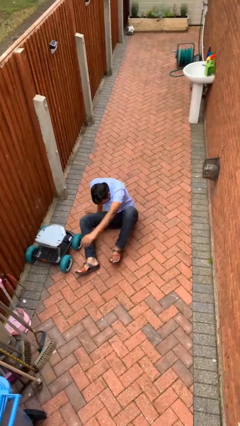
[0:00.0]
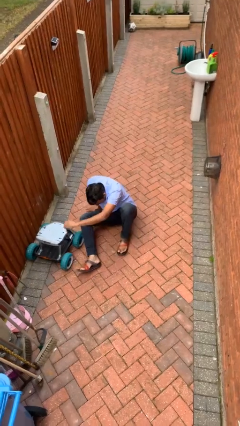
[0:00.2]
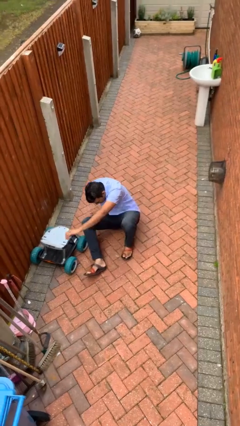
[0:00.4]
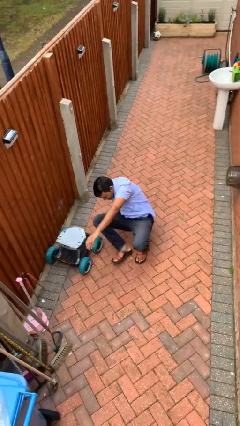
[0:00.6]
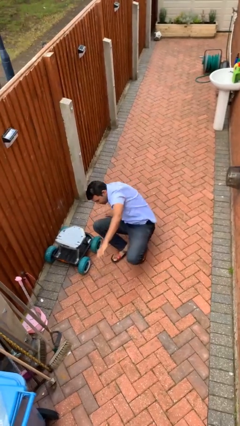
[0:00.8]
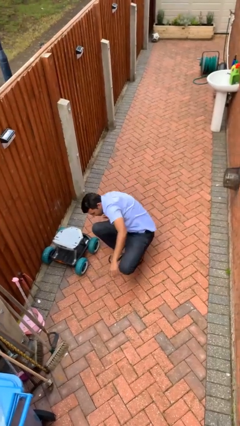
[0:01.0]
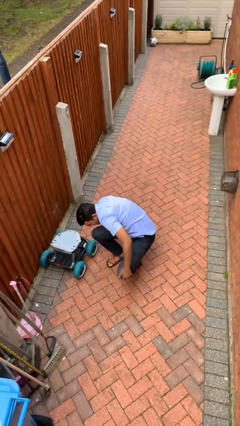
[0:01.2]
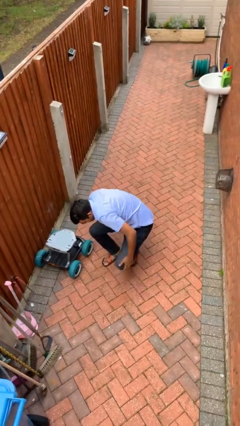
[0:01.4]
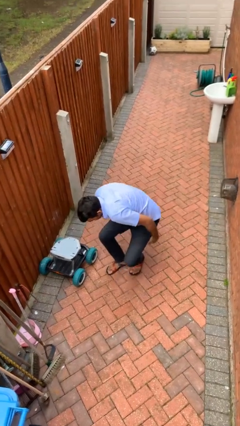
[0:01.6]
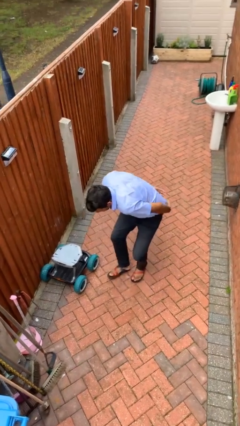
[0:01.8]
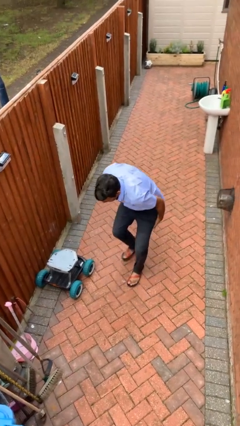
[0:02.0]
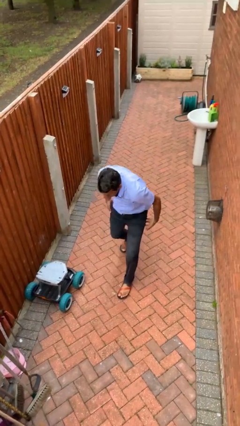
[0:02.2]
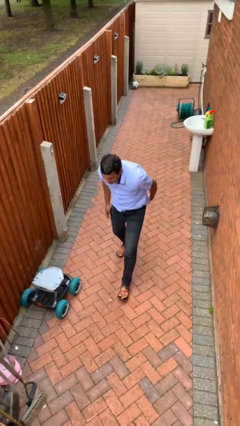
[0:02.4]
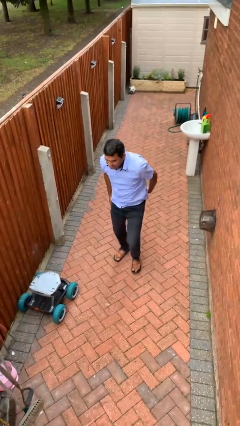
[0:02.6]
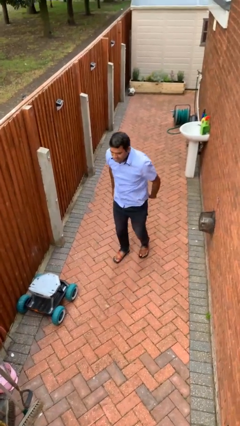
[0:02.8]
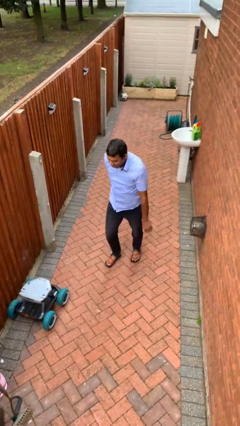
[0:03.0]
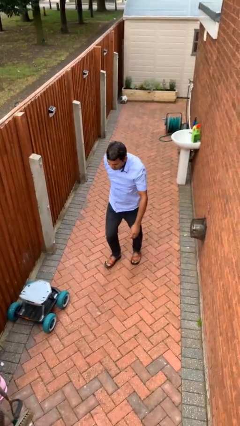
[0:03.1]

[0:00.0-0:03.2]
person stands up from floor

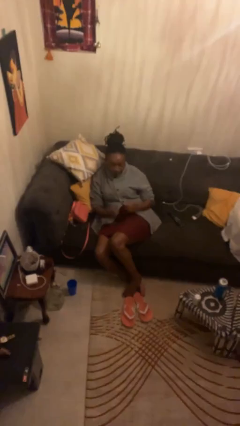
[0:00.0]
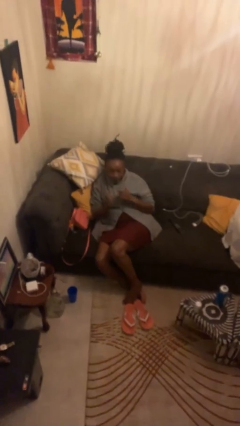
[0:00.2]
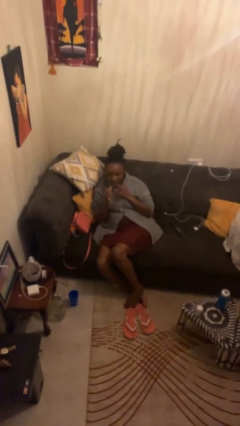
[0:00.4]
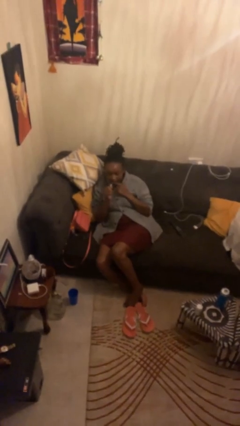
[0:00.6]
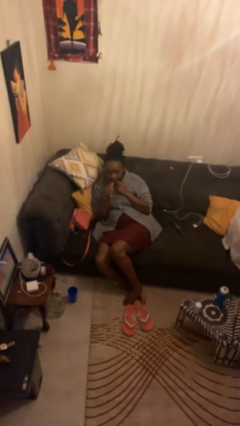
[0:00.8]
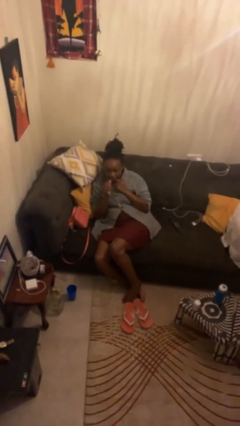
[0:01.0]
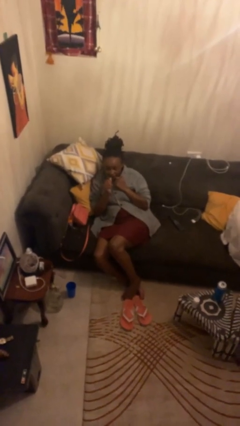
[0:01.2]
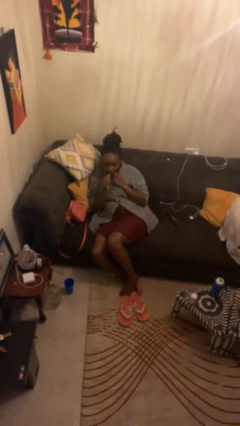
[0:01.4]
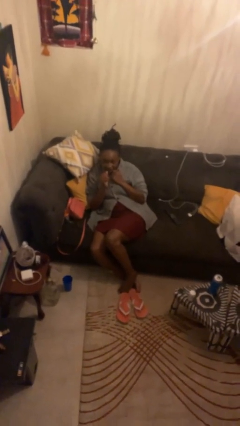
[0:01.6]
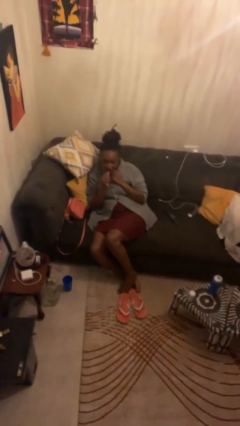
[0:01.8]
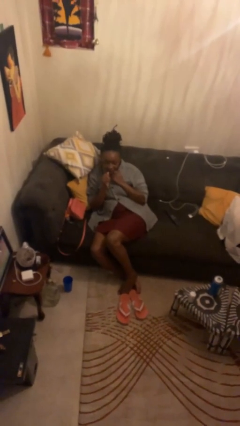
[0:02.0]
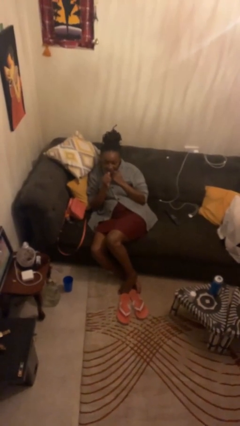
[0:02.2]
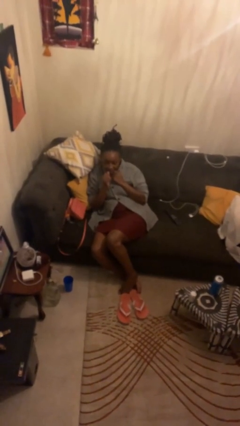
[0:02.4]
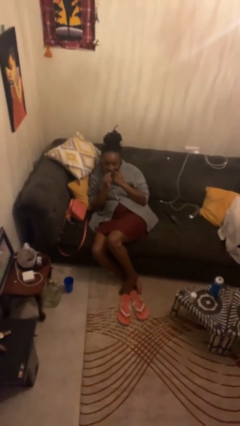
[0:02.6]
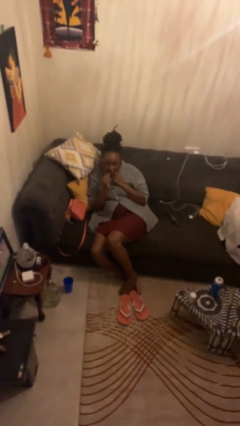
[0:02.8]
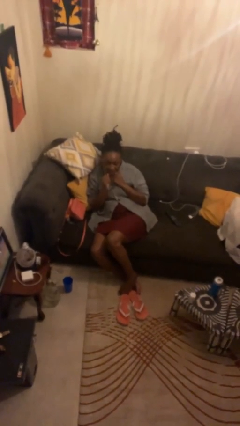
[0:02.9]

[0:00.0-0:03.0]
person flosses

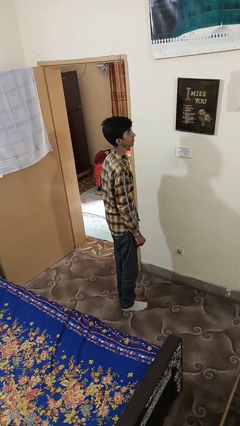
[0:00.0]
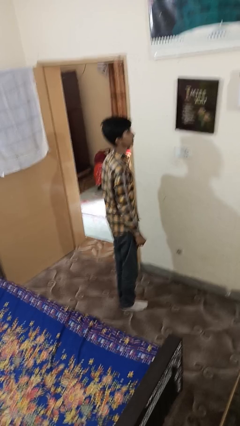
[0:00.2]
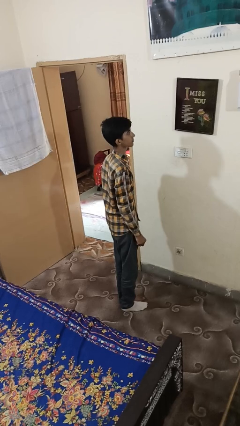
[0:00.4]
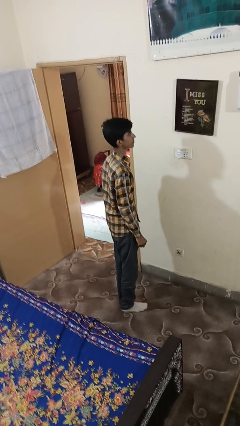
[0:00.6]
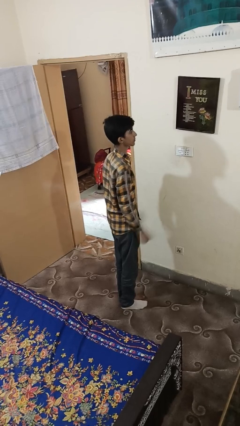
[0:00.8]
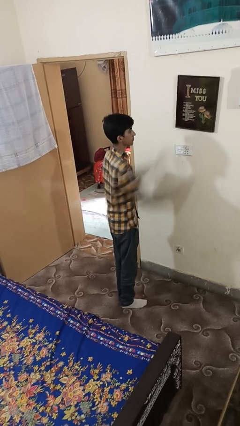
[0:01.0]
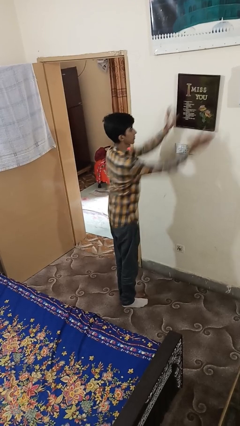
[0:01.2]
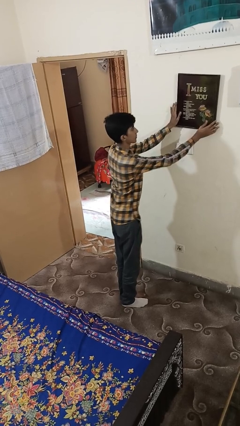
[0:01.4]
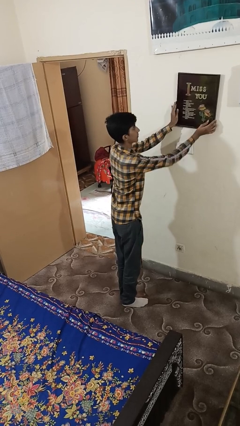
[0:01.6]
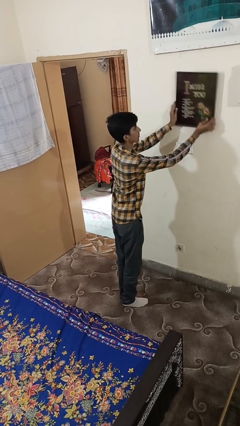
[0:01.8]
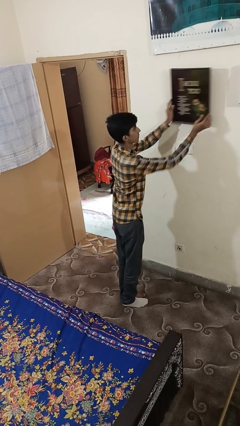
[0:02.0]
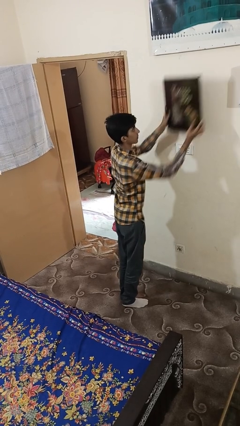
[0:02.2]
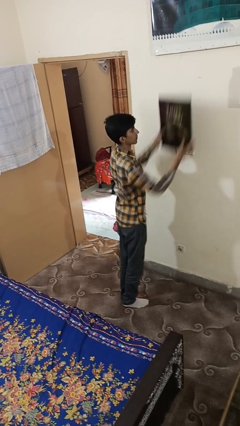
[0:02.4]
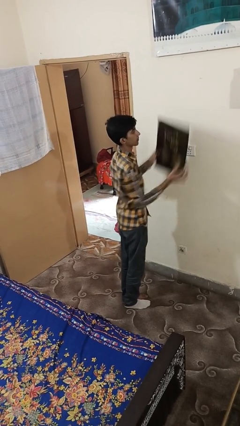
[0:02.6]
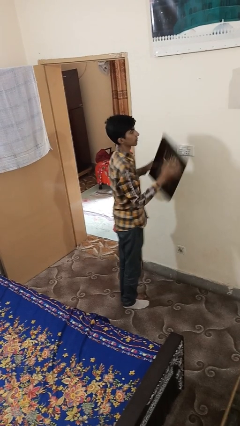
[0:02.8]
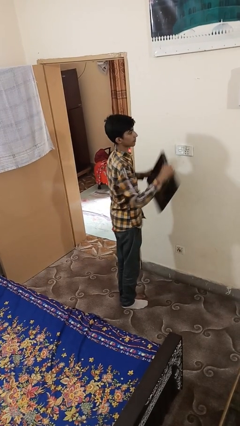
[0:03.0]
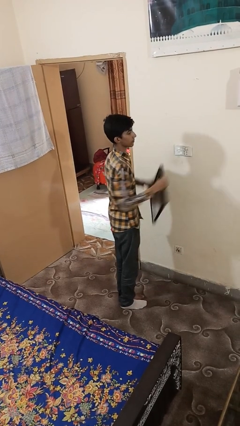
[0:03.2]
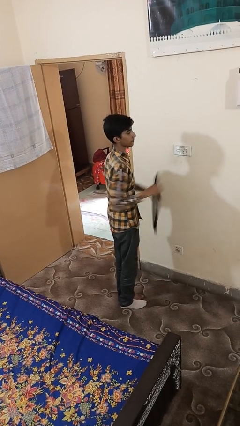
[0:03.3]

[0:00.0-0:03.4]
person takes down picture frame

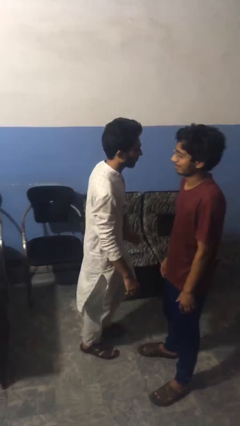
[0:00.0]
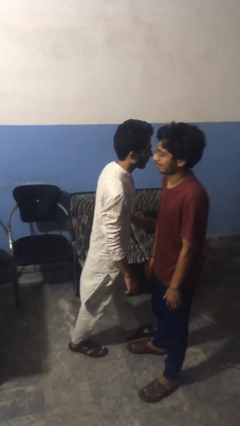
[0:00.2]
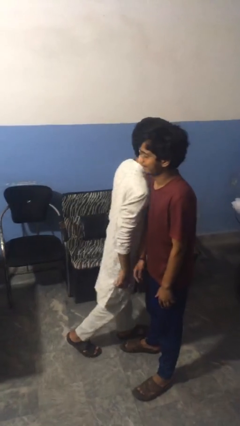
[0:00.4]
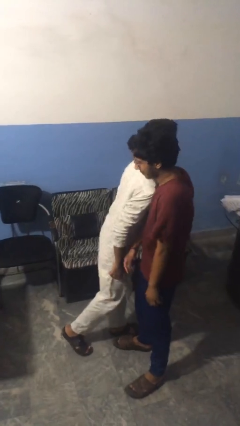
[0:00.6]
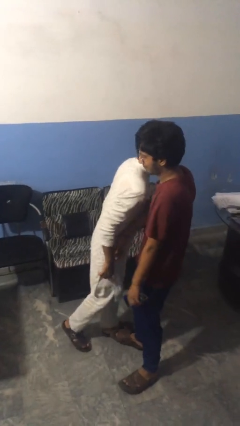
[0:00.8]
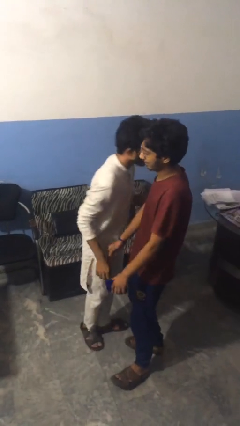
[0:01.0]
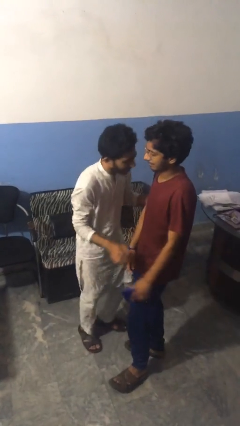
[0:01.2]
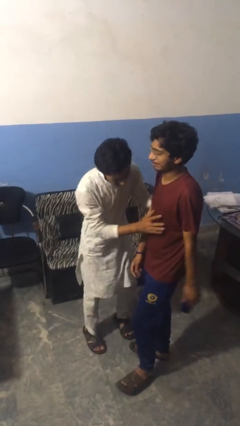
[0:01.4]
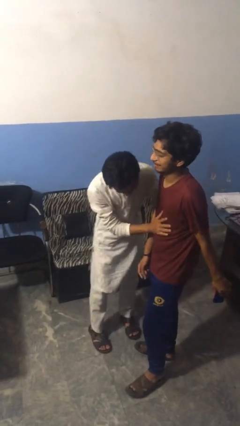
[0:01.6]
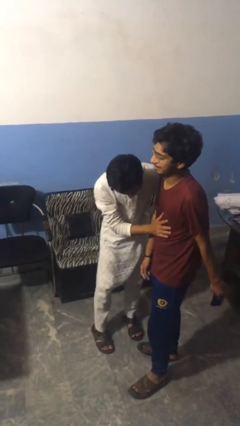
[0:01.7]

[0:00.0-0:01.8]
person bumps into person

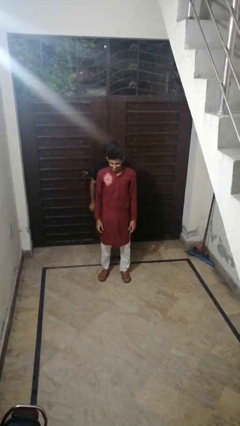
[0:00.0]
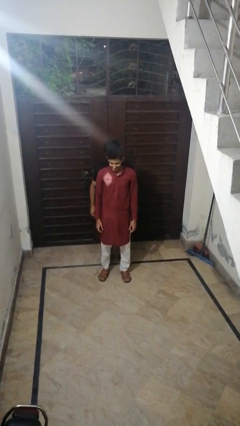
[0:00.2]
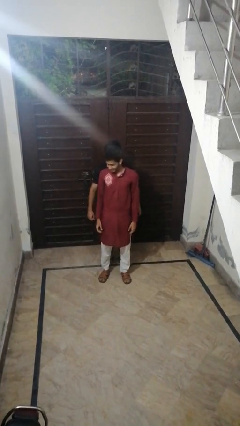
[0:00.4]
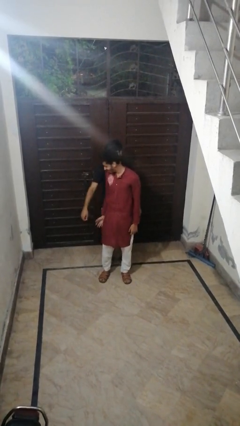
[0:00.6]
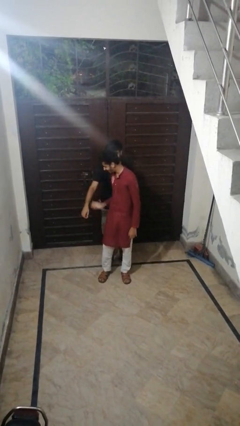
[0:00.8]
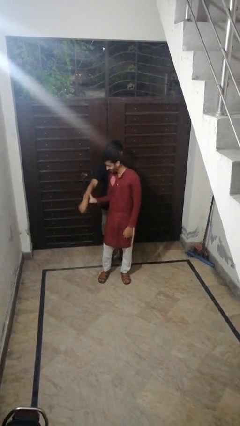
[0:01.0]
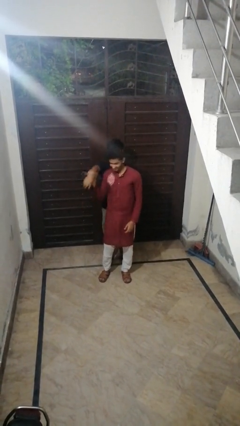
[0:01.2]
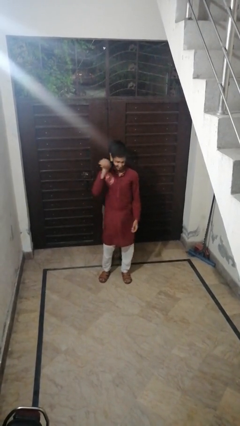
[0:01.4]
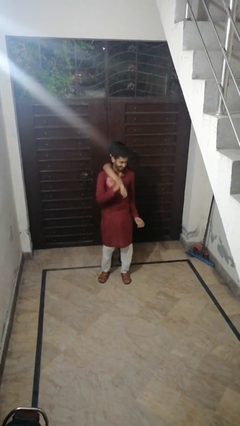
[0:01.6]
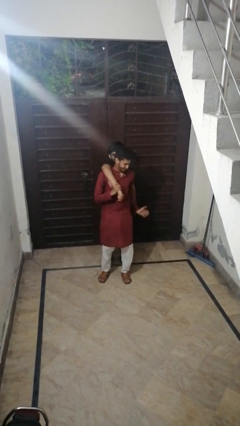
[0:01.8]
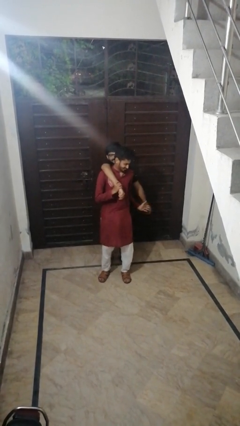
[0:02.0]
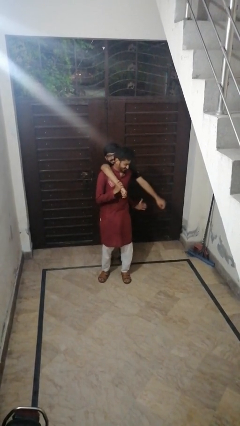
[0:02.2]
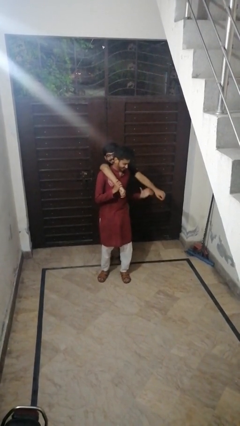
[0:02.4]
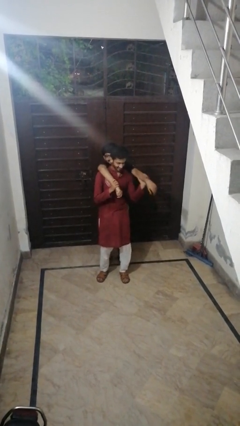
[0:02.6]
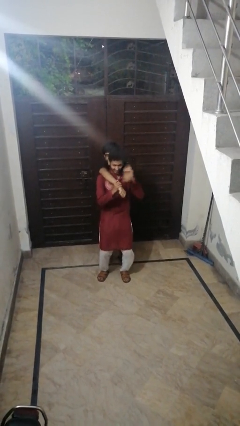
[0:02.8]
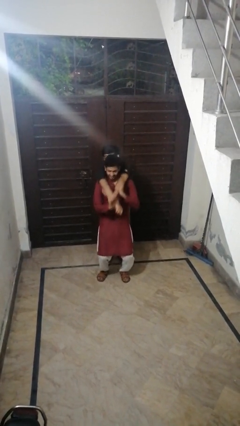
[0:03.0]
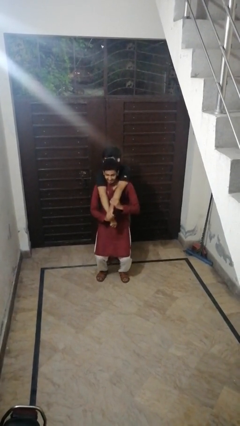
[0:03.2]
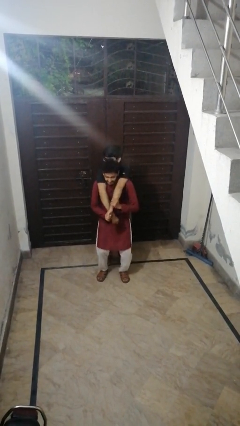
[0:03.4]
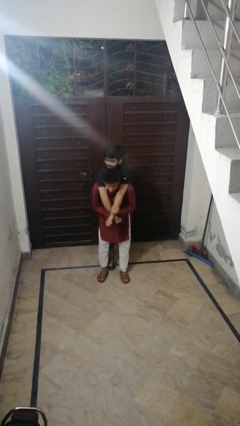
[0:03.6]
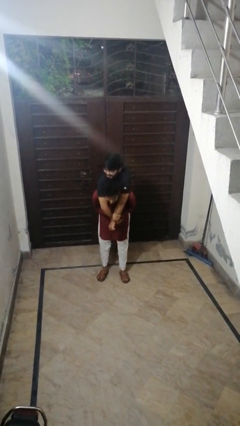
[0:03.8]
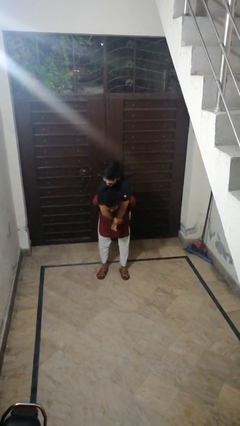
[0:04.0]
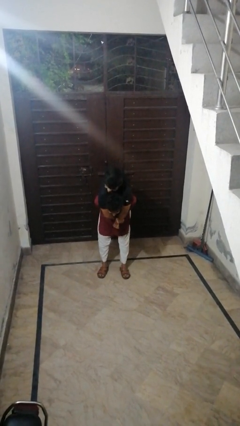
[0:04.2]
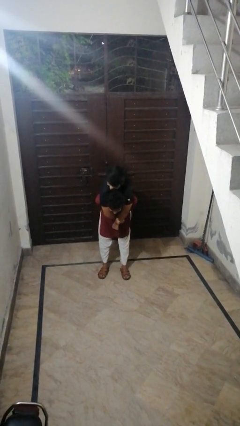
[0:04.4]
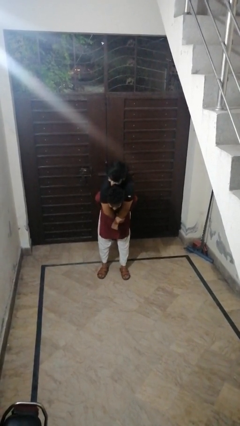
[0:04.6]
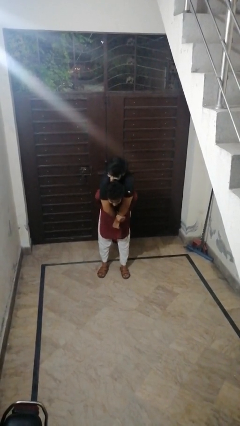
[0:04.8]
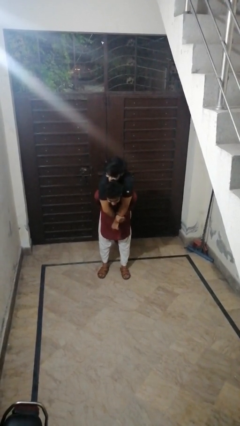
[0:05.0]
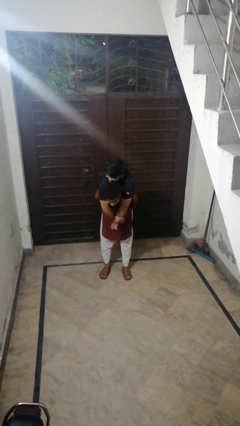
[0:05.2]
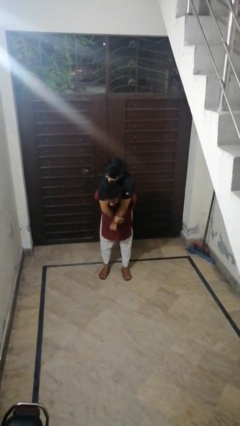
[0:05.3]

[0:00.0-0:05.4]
person carries person over shoulder

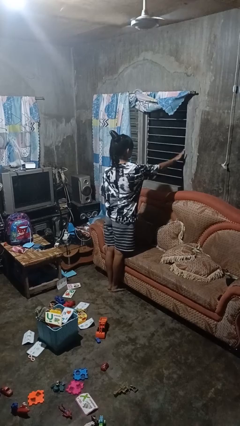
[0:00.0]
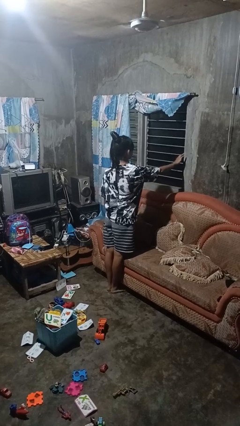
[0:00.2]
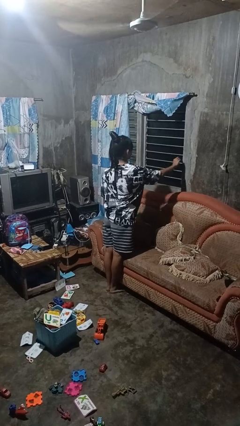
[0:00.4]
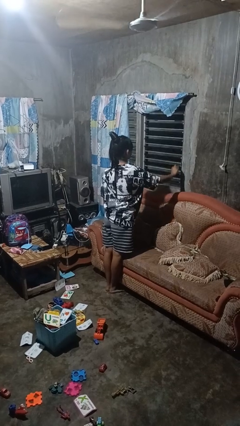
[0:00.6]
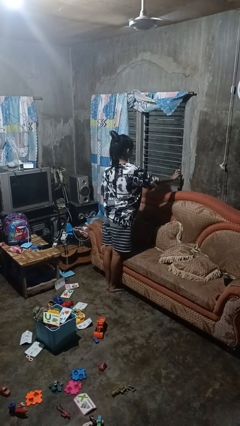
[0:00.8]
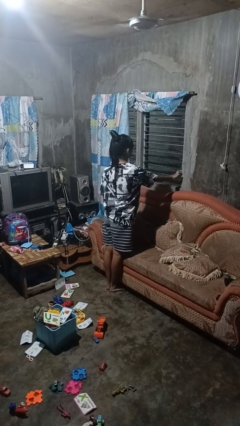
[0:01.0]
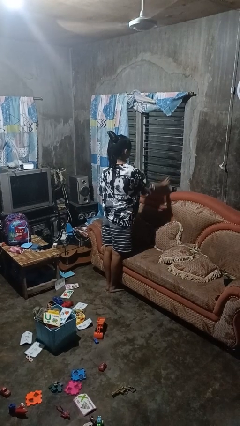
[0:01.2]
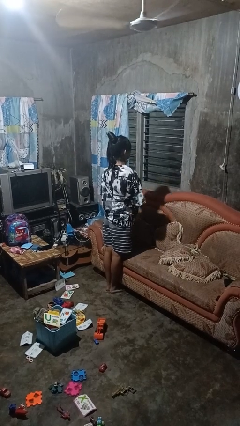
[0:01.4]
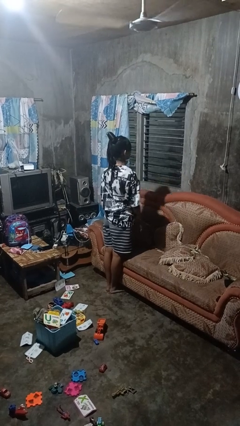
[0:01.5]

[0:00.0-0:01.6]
person opens home window
